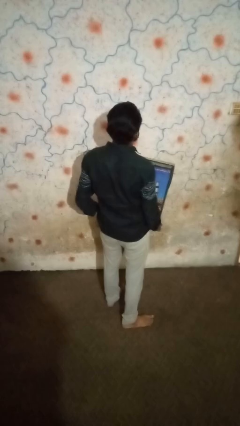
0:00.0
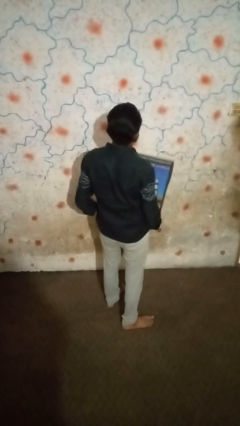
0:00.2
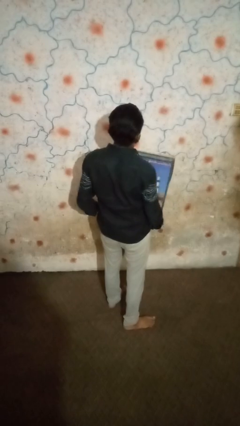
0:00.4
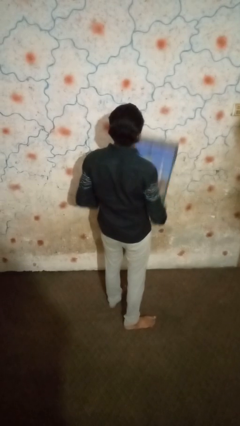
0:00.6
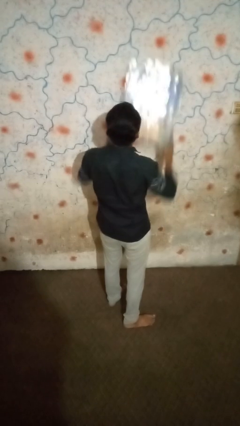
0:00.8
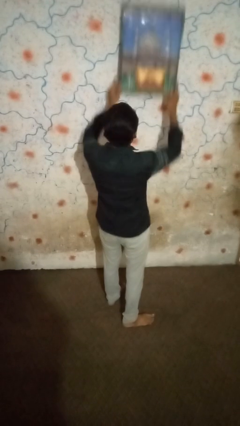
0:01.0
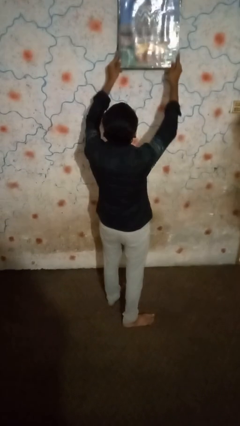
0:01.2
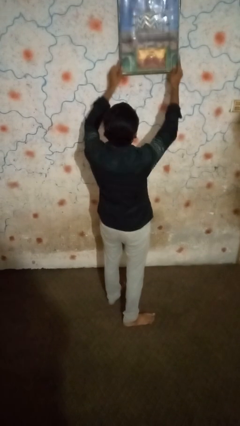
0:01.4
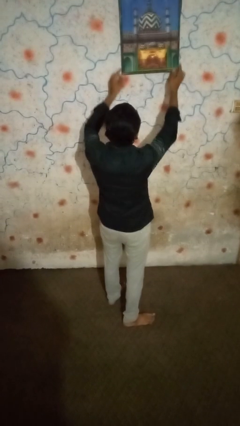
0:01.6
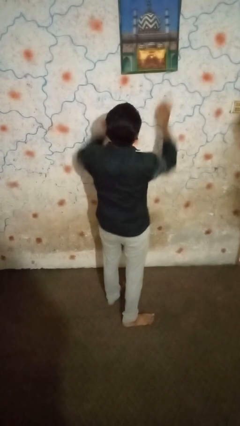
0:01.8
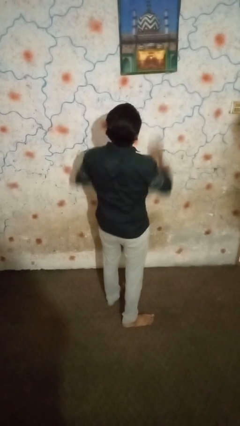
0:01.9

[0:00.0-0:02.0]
person puts up picture frame

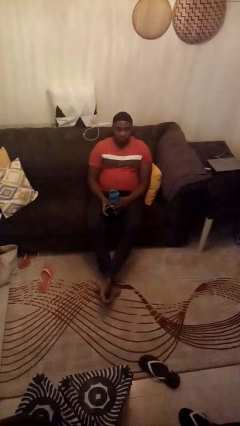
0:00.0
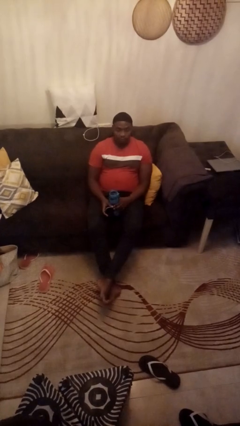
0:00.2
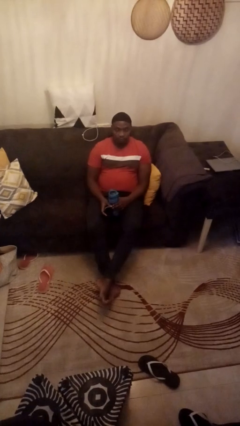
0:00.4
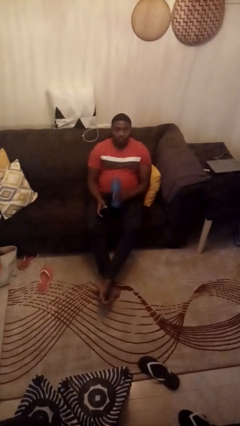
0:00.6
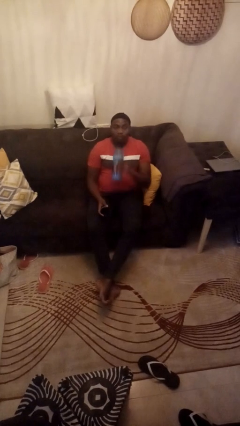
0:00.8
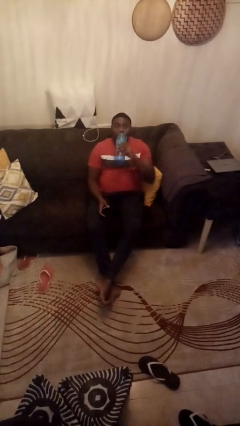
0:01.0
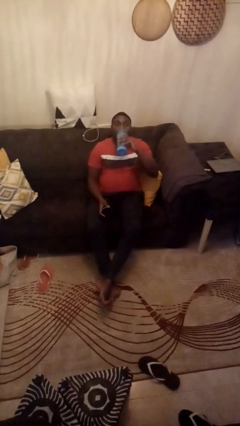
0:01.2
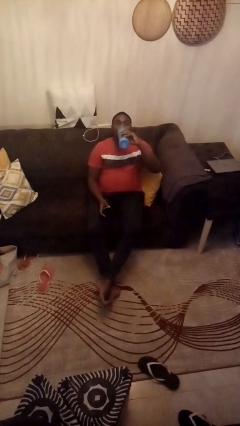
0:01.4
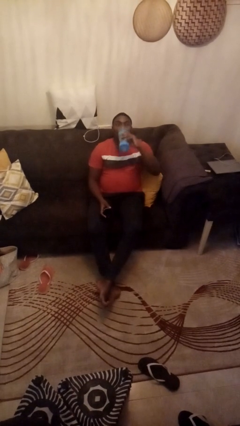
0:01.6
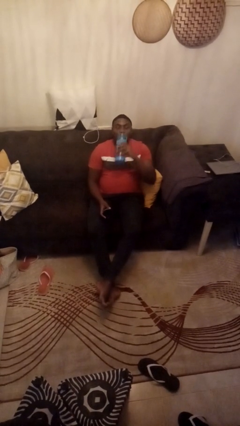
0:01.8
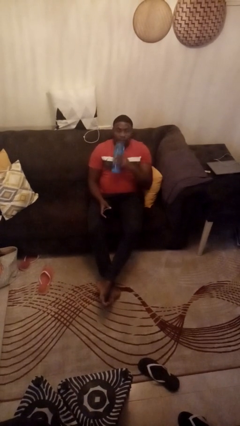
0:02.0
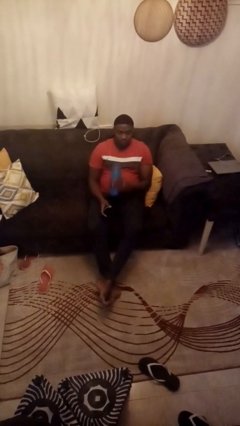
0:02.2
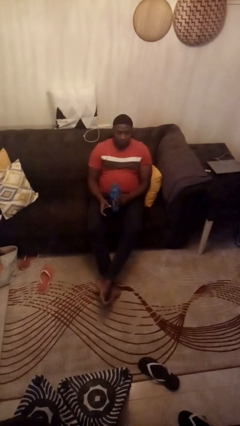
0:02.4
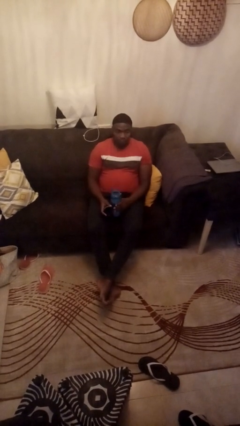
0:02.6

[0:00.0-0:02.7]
person drinks from bottle

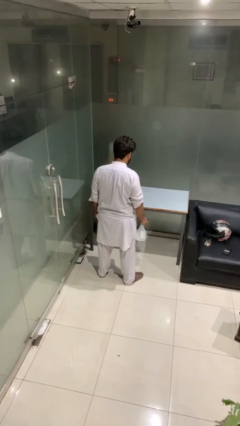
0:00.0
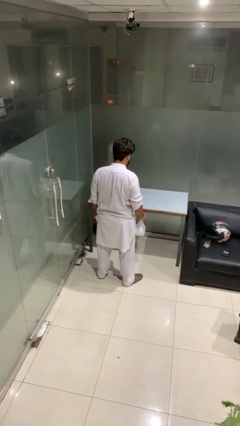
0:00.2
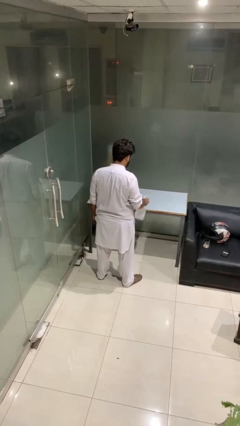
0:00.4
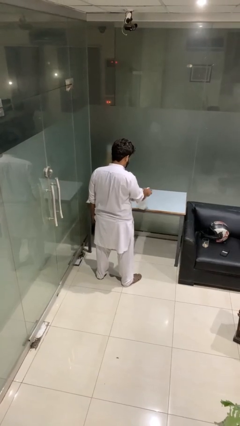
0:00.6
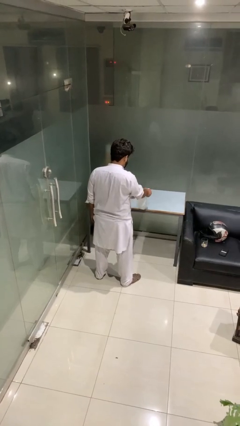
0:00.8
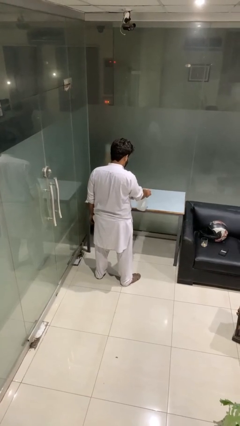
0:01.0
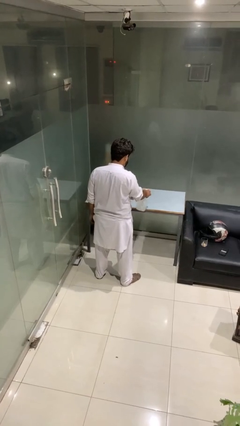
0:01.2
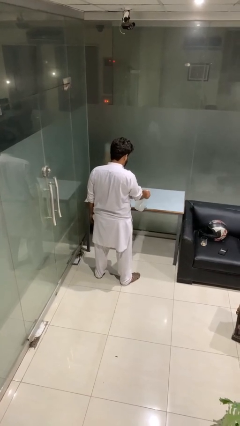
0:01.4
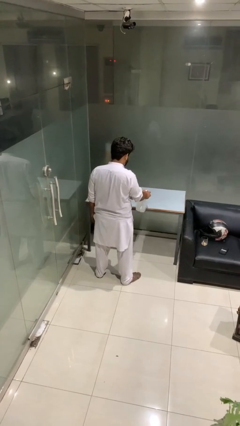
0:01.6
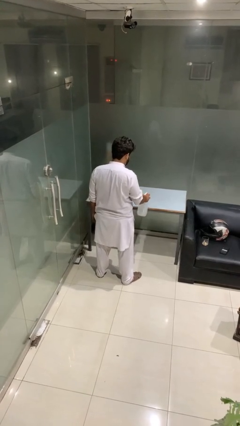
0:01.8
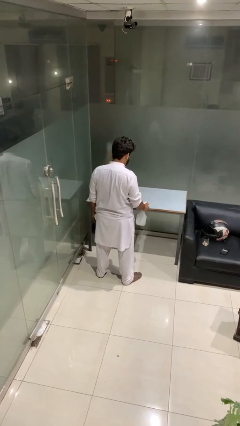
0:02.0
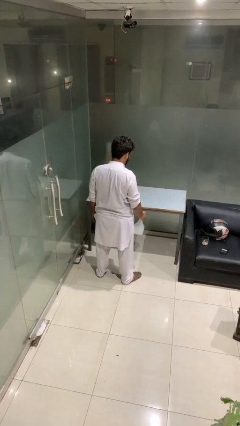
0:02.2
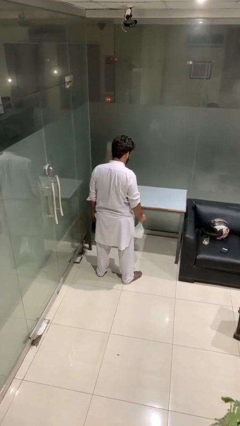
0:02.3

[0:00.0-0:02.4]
person sprays from bottle

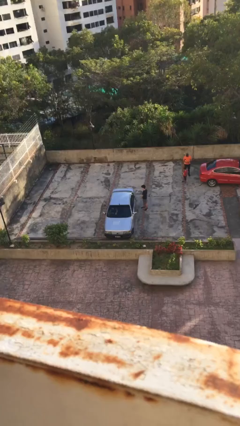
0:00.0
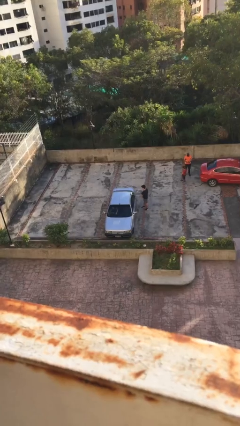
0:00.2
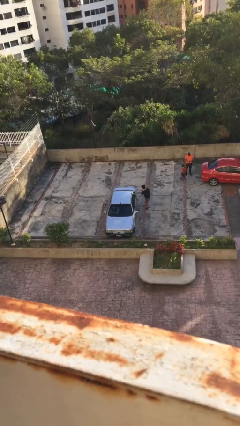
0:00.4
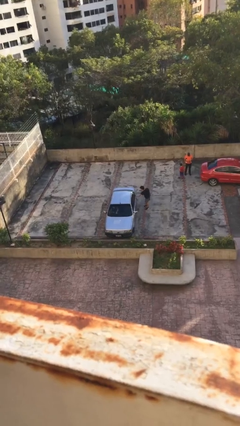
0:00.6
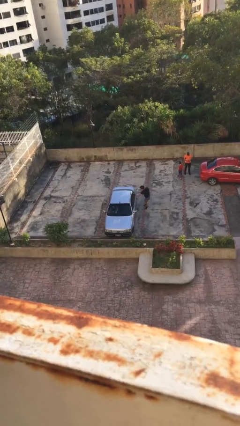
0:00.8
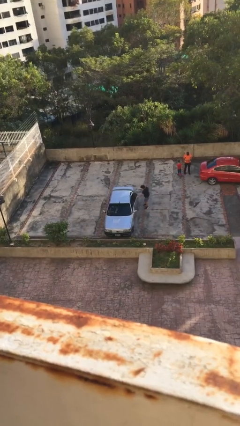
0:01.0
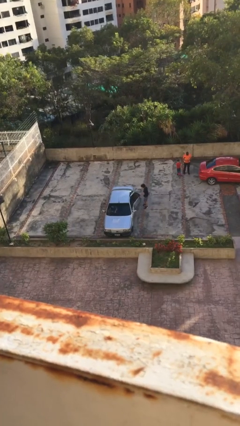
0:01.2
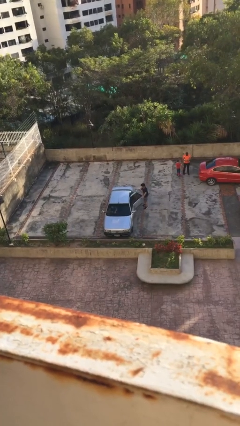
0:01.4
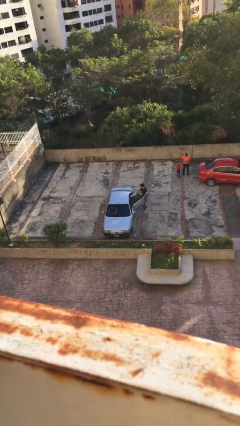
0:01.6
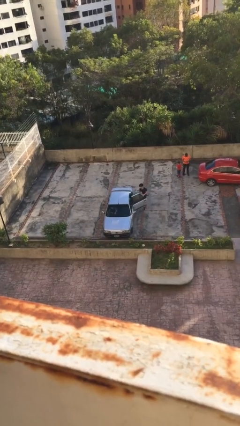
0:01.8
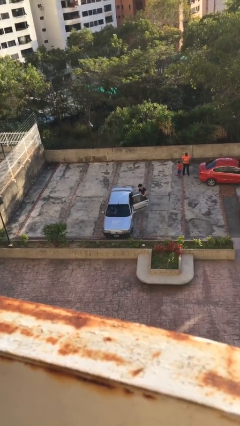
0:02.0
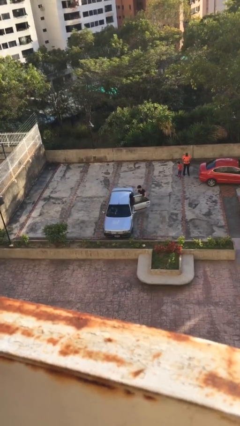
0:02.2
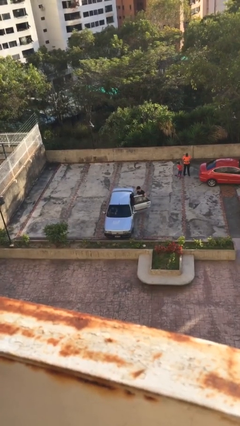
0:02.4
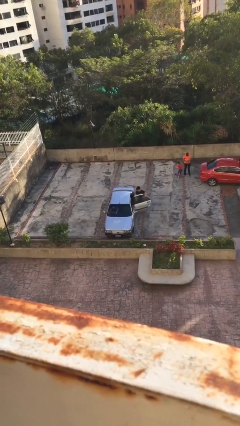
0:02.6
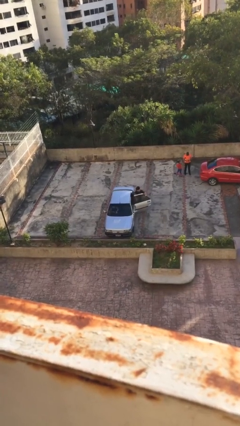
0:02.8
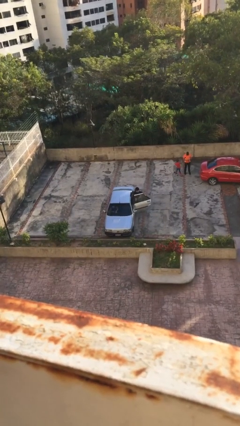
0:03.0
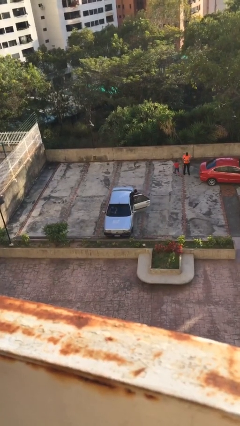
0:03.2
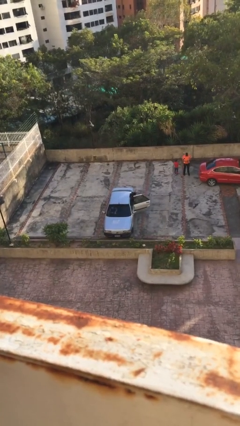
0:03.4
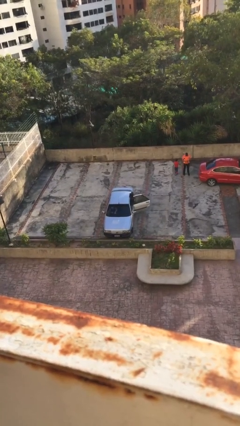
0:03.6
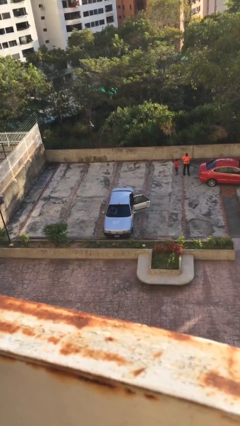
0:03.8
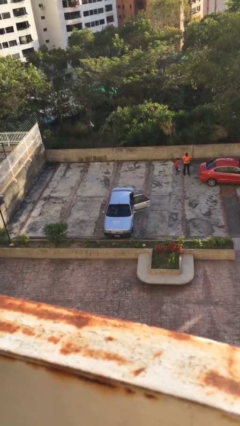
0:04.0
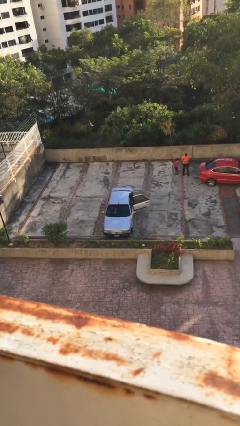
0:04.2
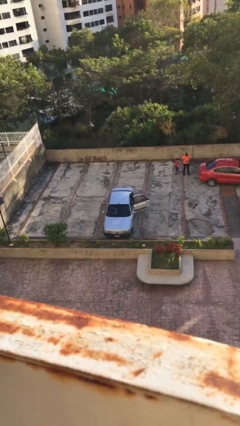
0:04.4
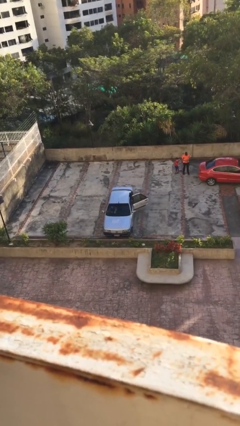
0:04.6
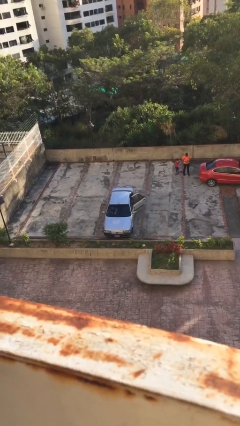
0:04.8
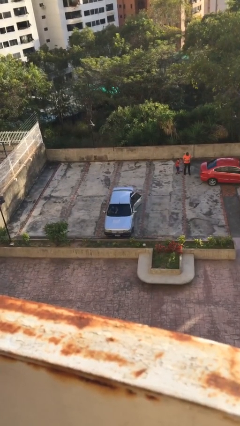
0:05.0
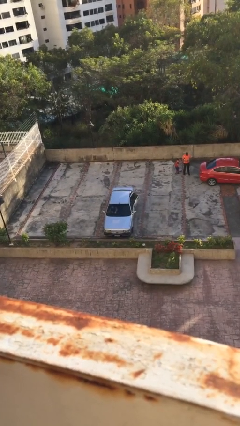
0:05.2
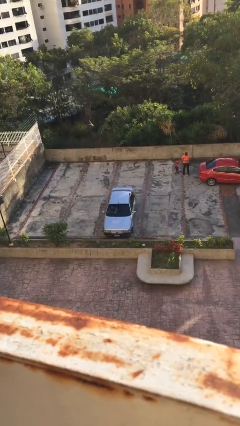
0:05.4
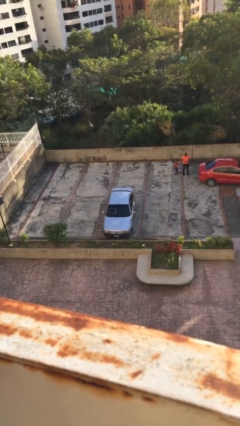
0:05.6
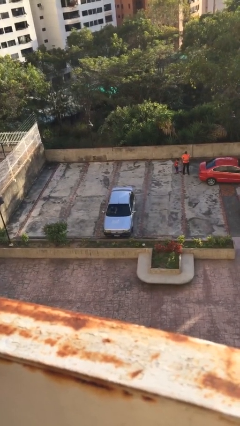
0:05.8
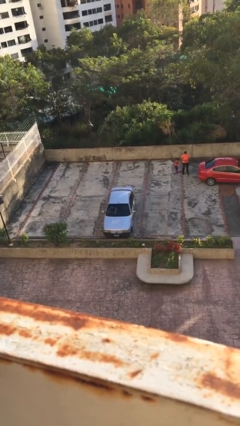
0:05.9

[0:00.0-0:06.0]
car picks up person

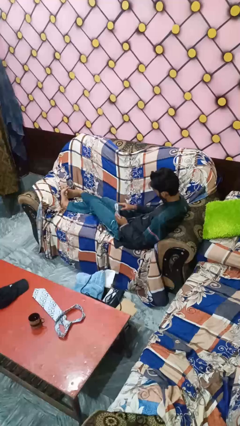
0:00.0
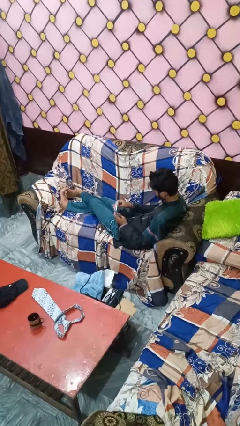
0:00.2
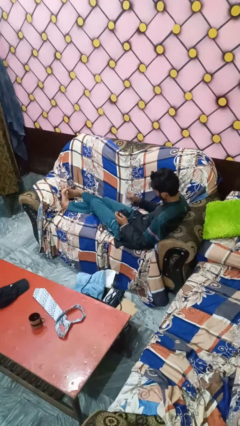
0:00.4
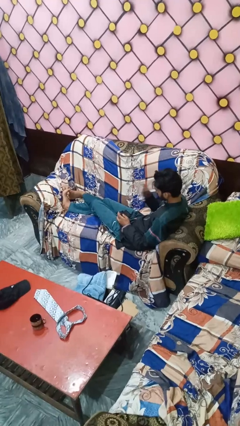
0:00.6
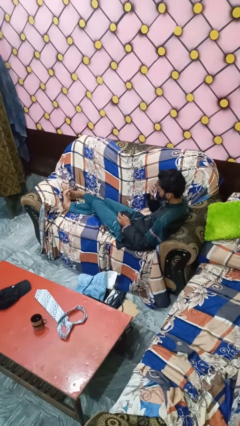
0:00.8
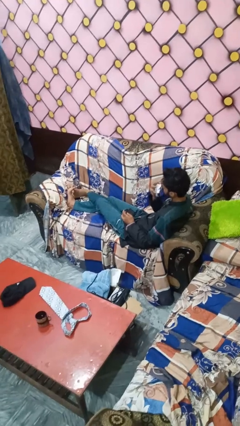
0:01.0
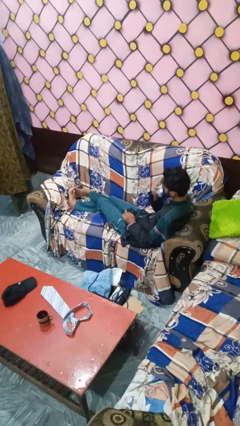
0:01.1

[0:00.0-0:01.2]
person blows nose

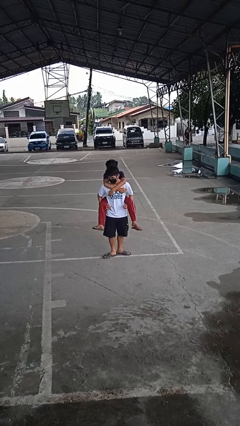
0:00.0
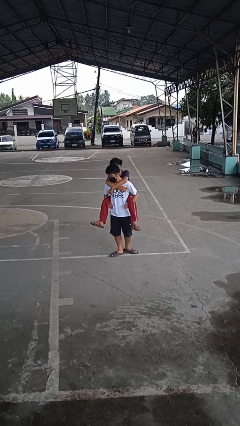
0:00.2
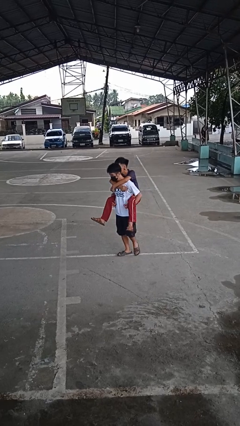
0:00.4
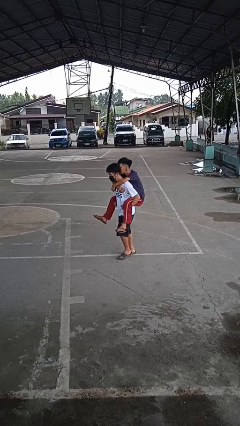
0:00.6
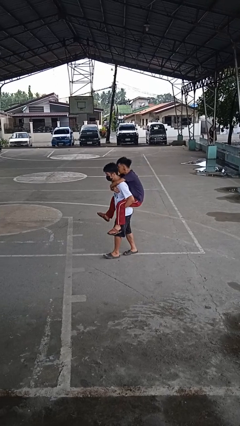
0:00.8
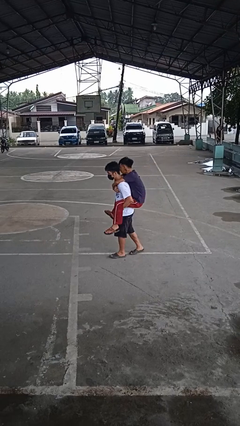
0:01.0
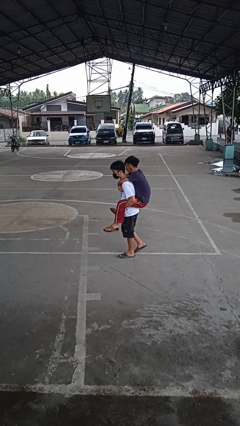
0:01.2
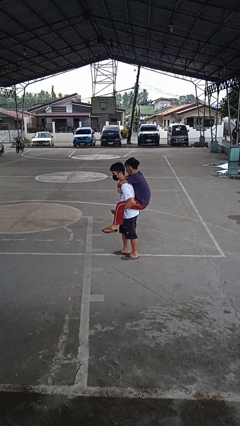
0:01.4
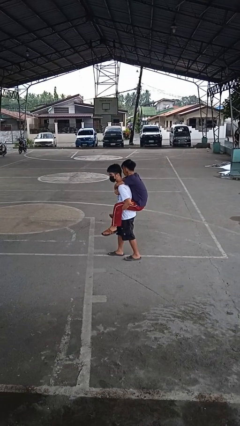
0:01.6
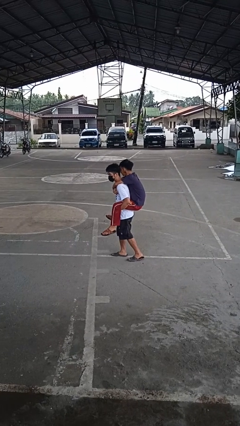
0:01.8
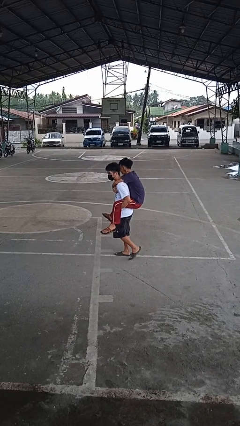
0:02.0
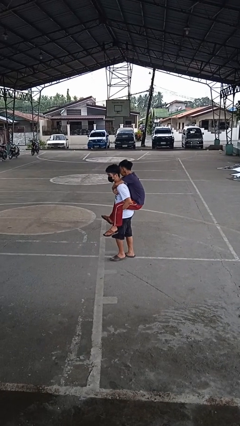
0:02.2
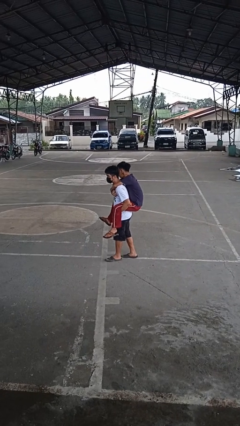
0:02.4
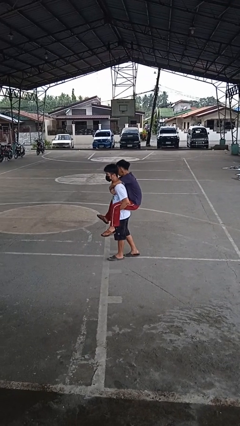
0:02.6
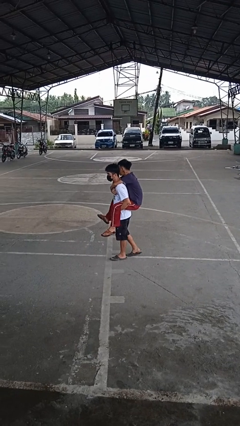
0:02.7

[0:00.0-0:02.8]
person carries person on back

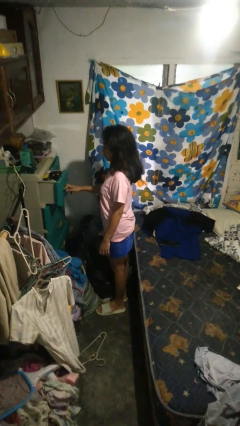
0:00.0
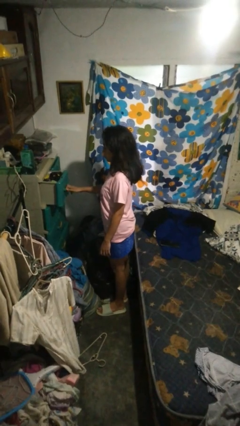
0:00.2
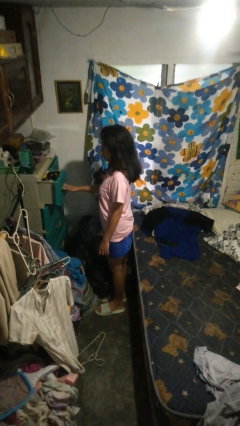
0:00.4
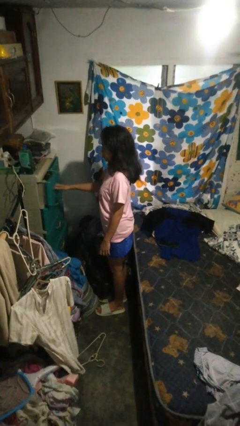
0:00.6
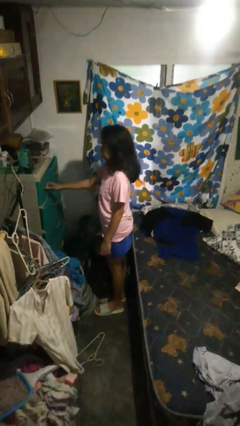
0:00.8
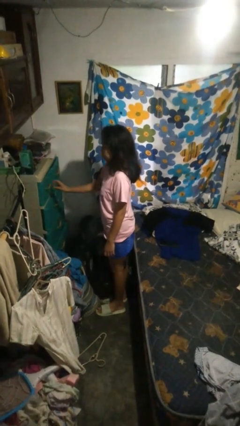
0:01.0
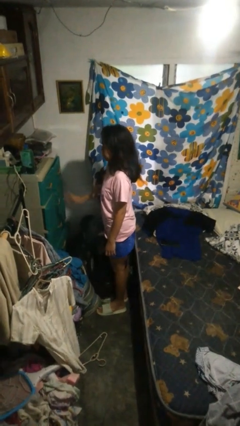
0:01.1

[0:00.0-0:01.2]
person closes dresser drawer
